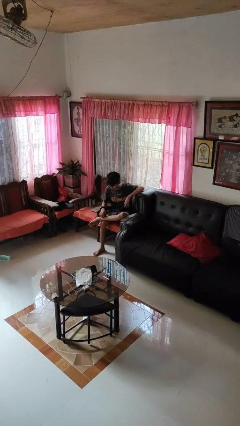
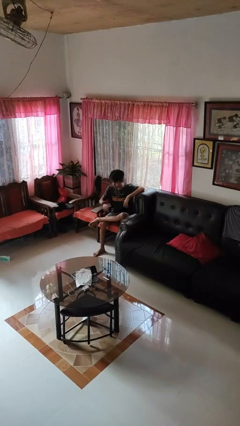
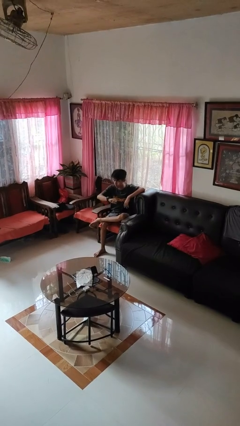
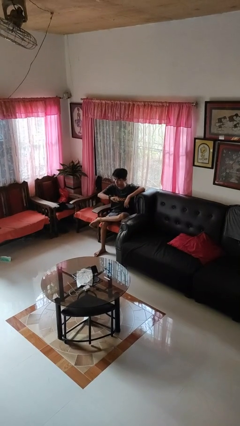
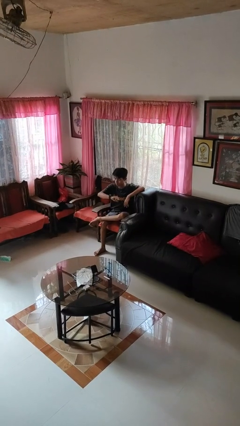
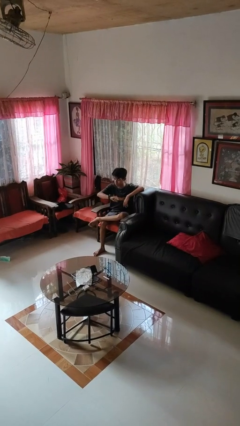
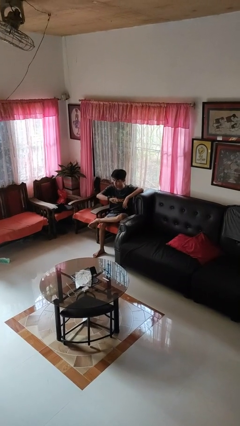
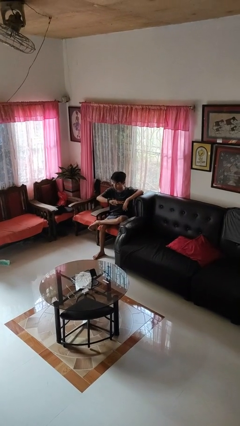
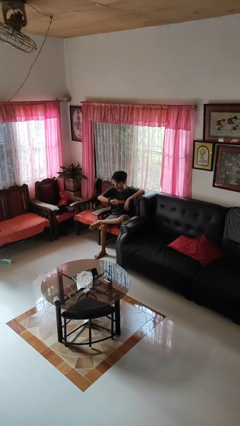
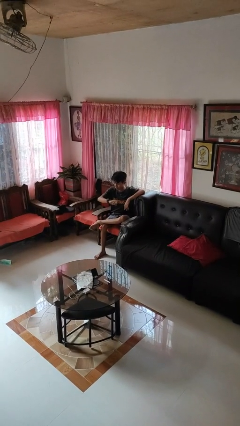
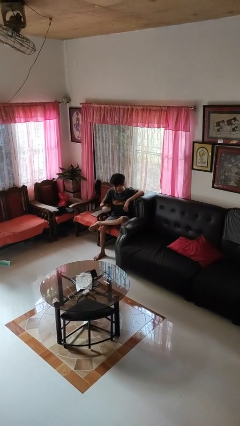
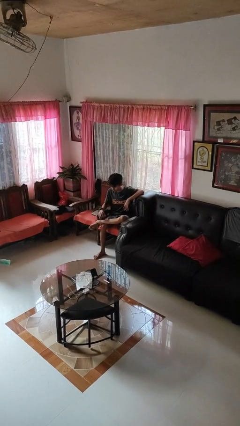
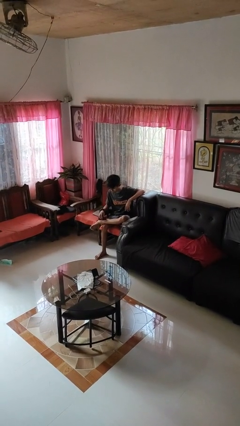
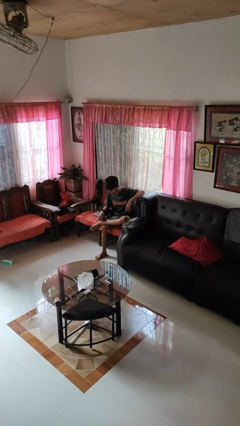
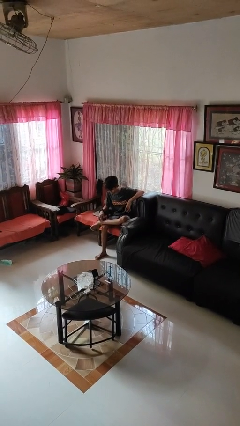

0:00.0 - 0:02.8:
person looks at wristwatch

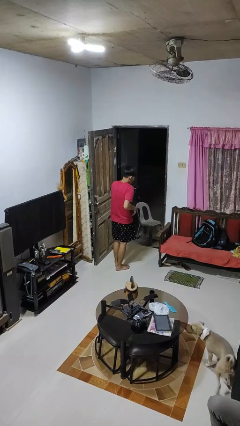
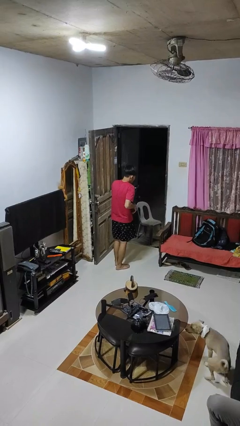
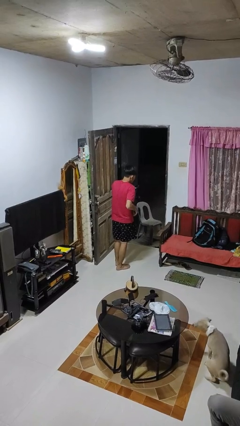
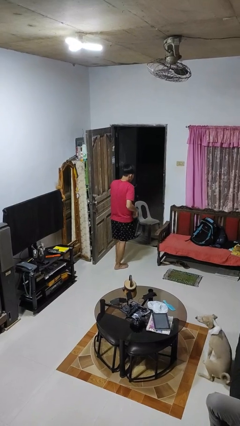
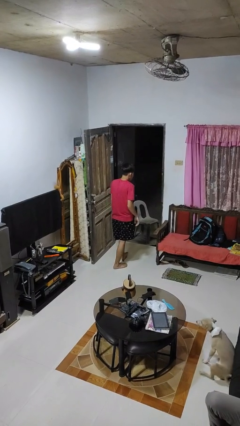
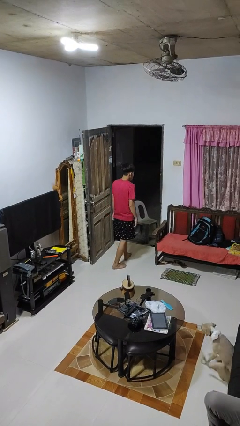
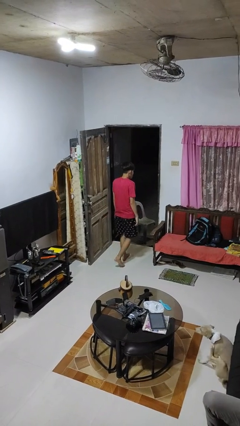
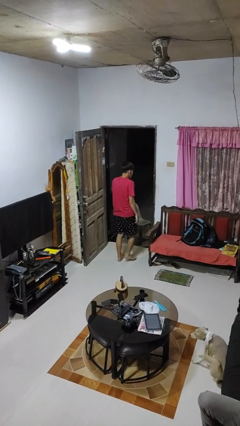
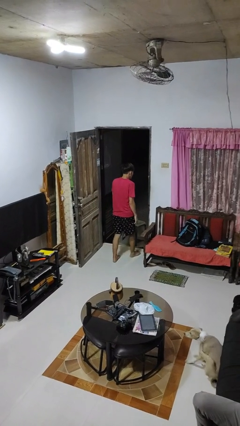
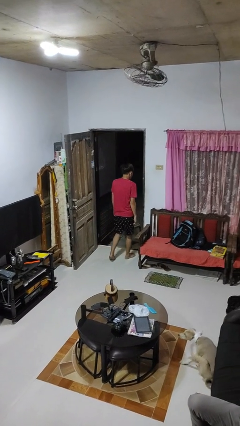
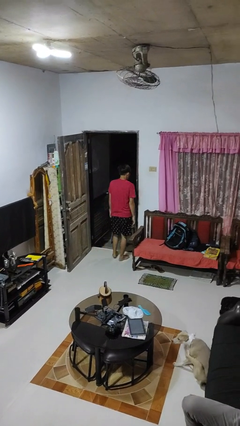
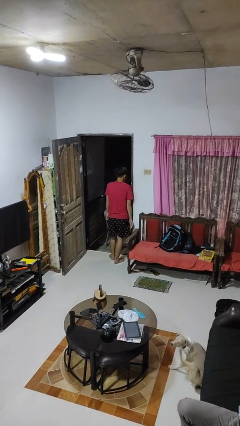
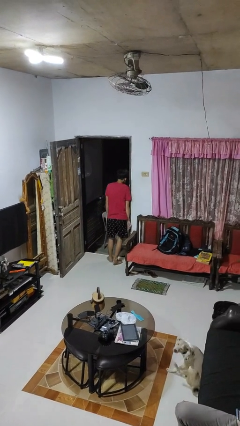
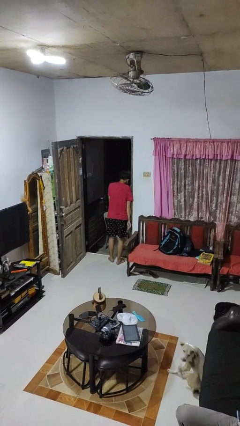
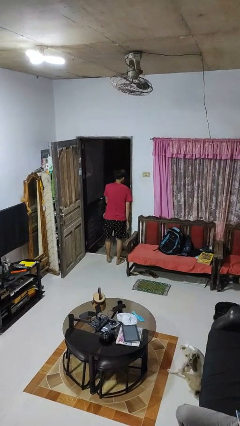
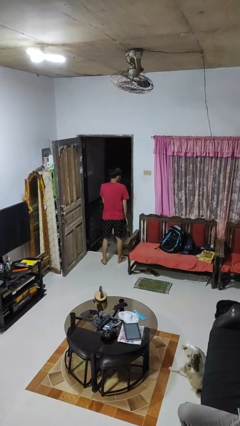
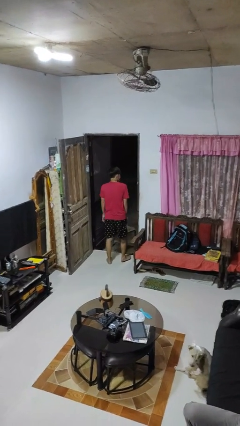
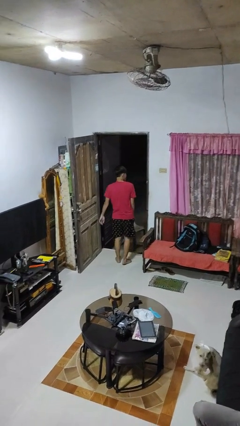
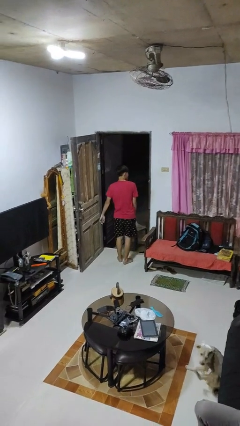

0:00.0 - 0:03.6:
person bumps into wall

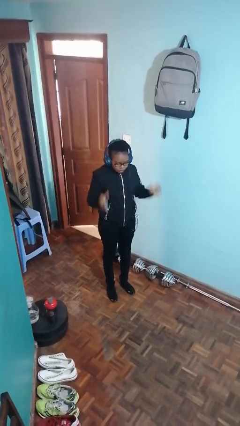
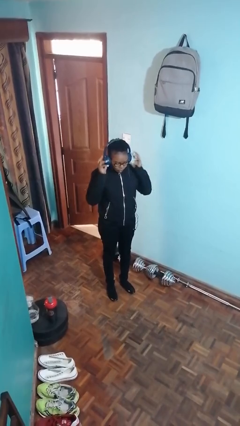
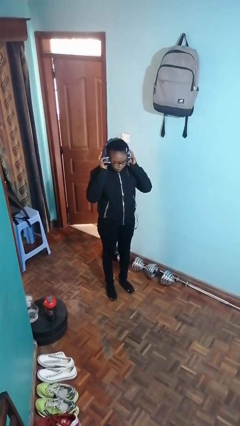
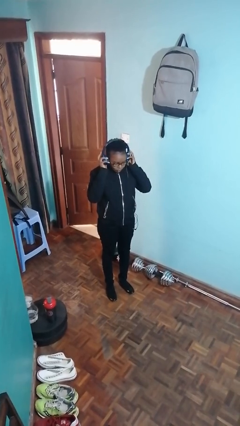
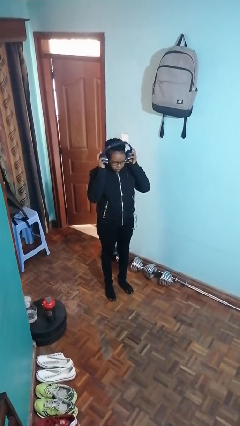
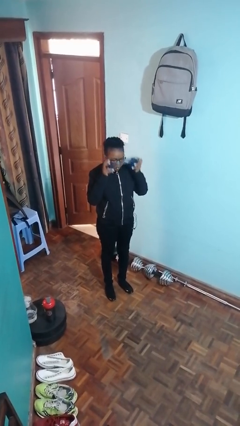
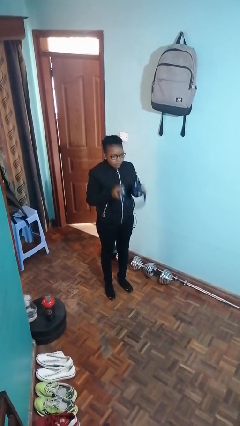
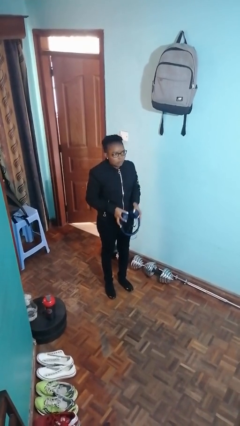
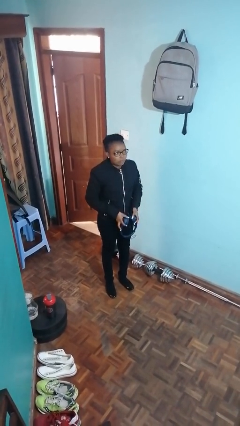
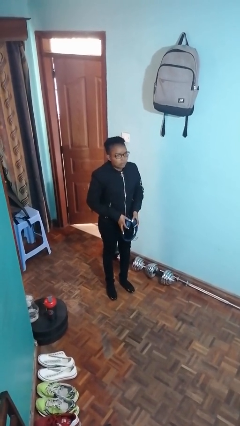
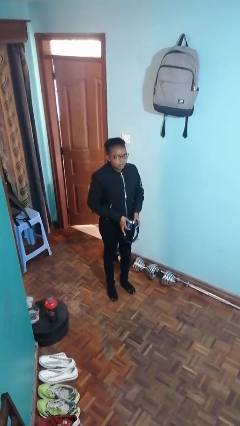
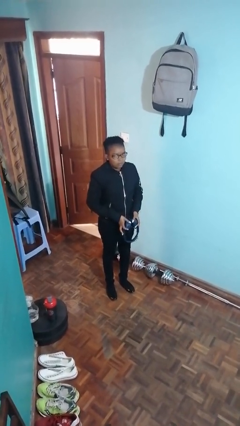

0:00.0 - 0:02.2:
person takes off headphones

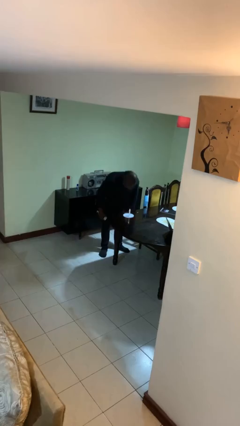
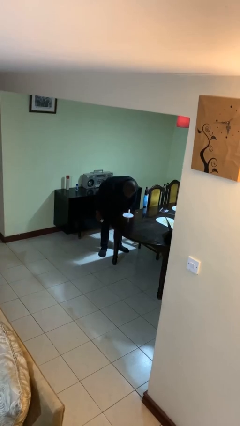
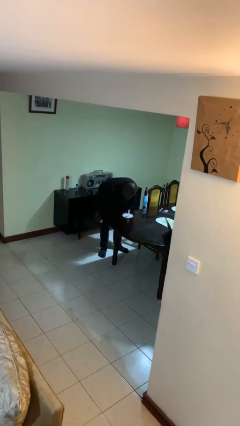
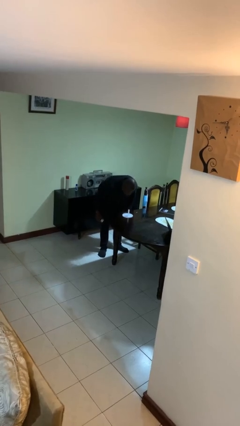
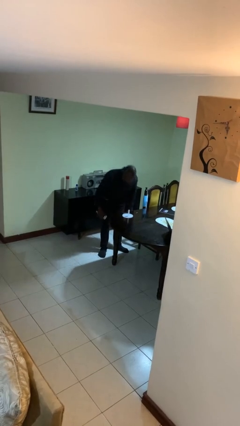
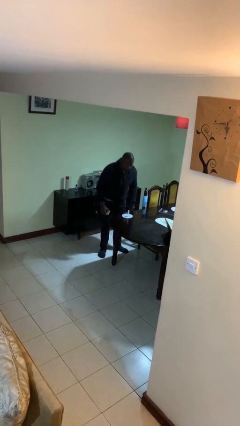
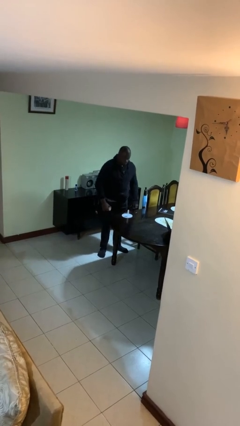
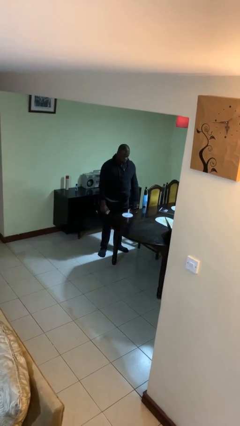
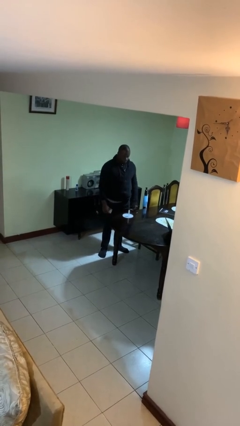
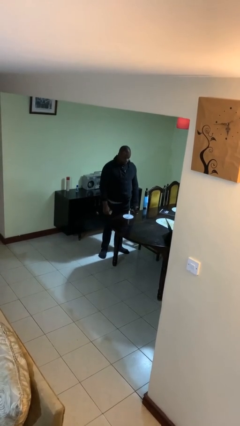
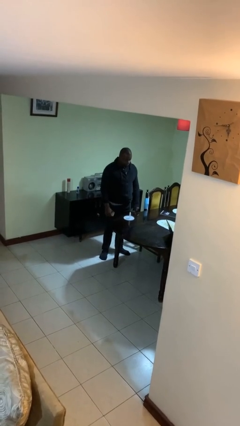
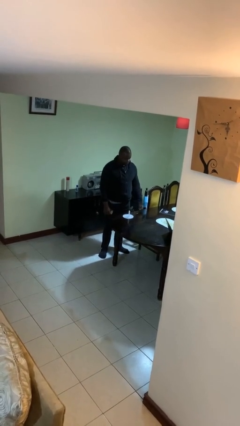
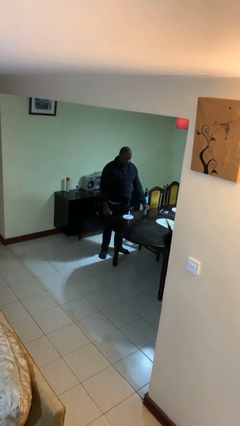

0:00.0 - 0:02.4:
person extinguishes candle

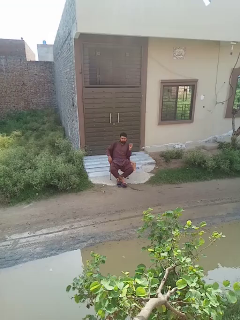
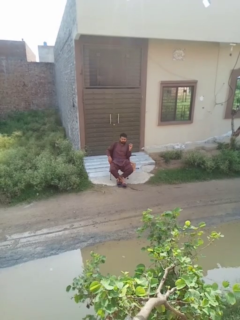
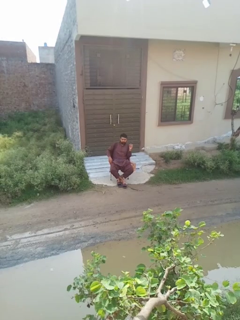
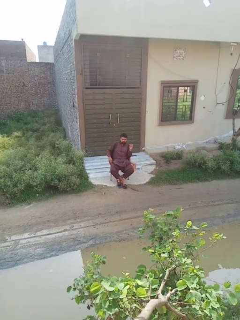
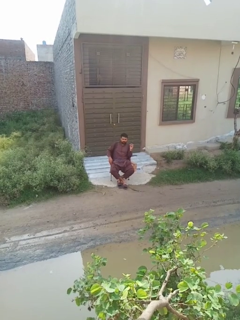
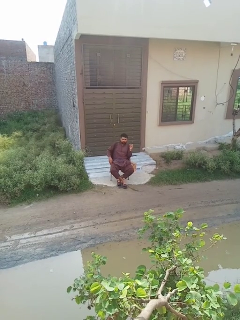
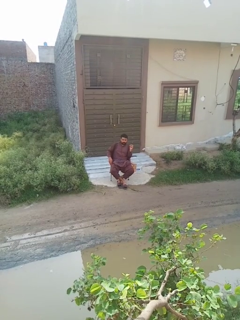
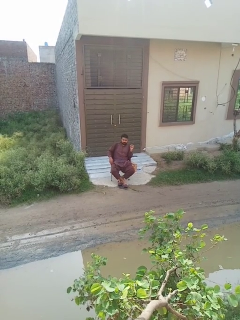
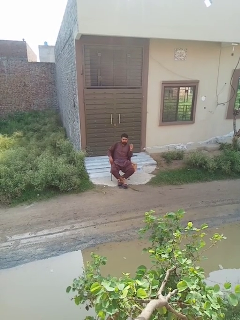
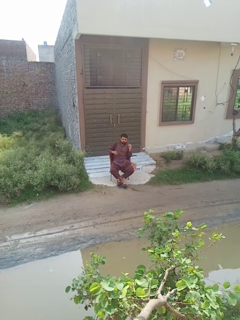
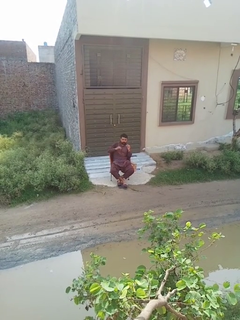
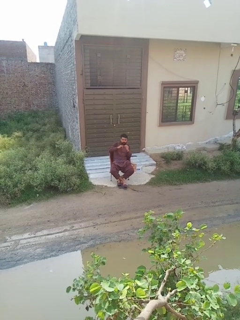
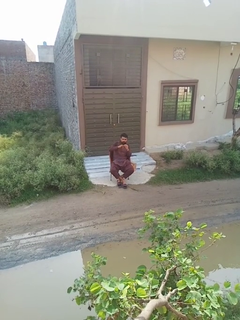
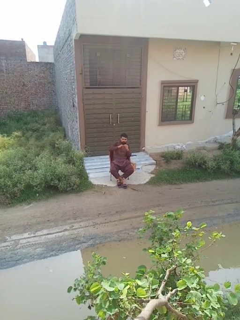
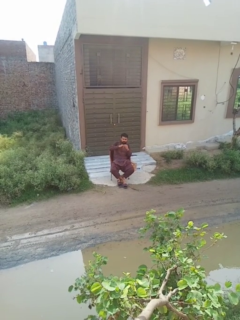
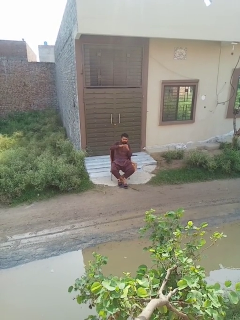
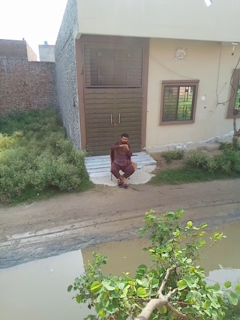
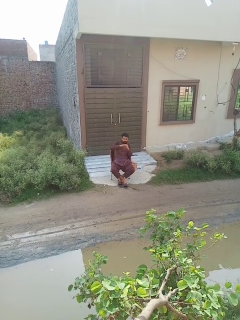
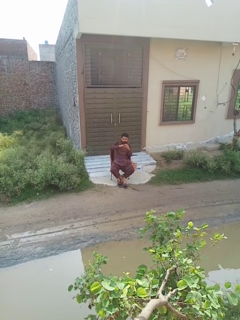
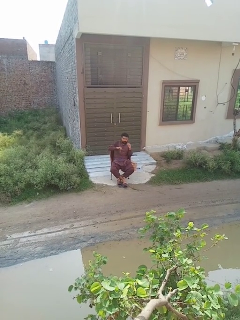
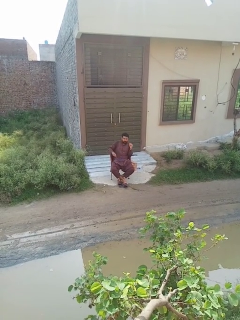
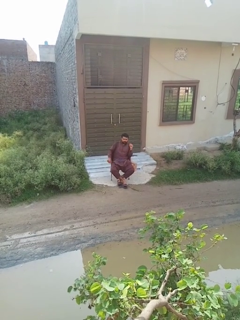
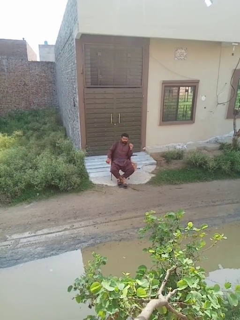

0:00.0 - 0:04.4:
person puts on ring

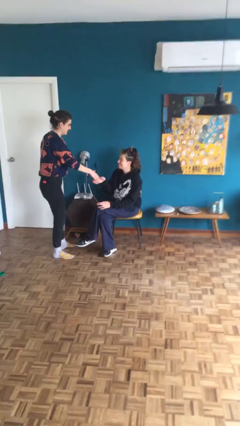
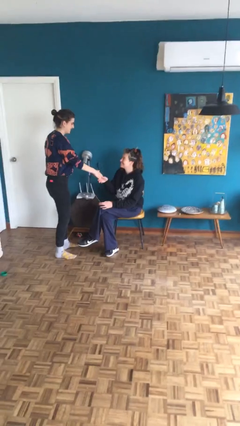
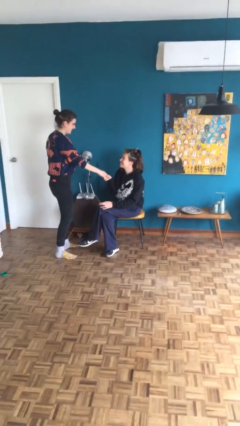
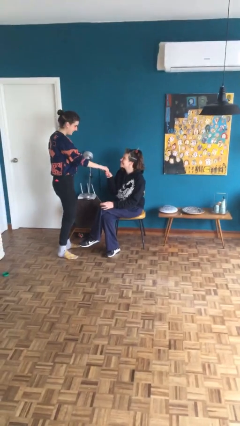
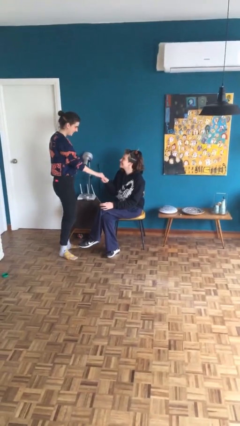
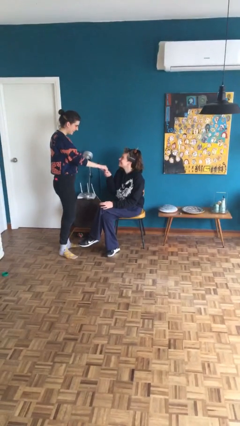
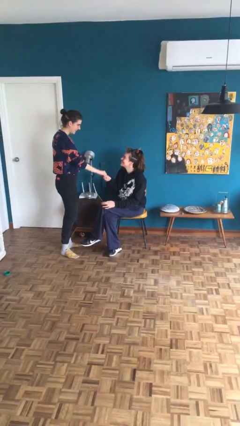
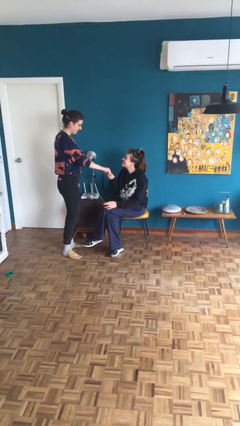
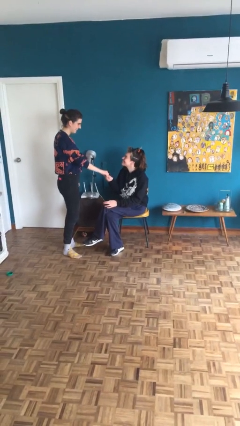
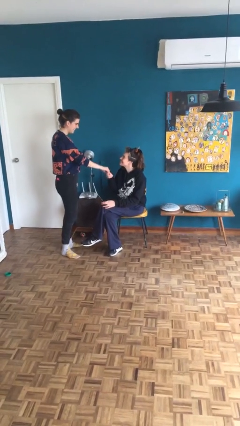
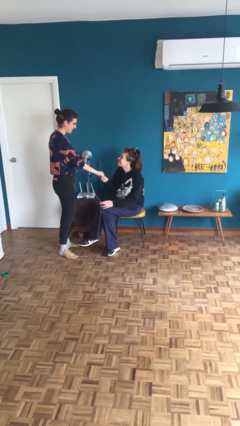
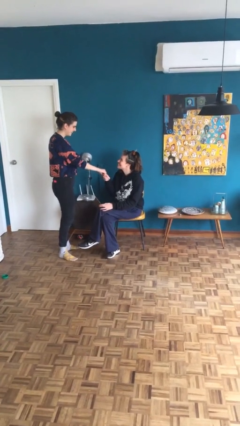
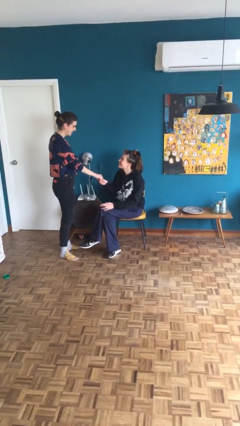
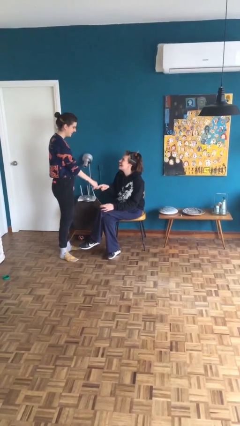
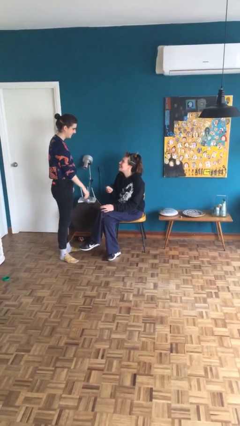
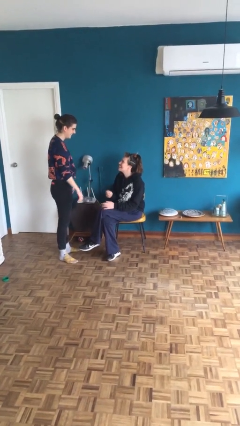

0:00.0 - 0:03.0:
person shakes hand
